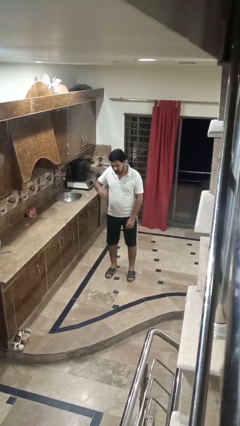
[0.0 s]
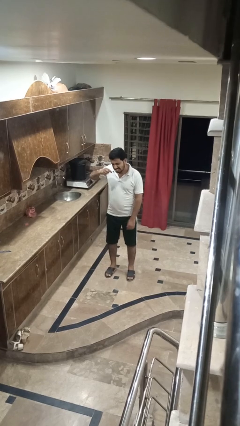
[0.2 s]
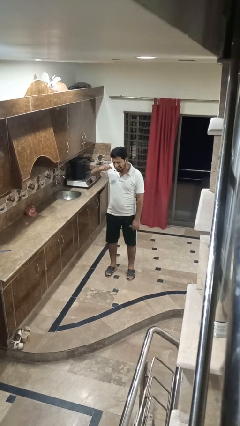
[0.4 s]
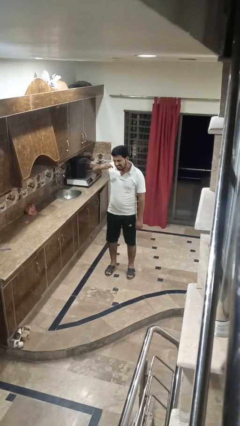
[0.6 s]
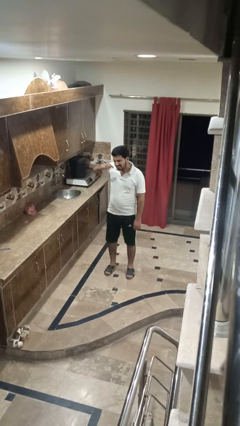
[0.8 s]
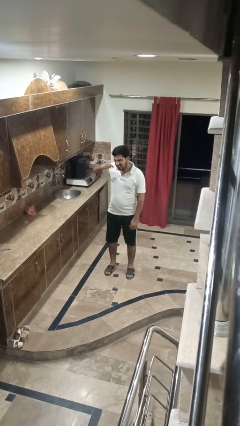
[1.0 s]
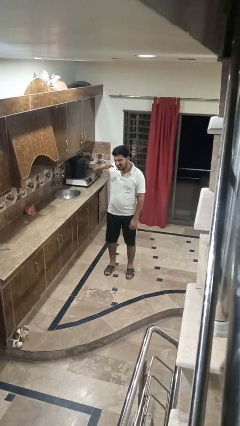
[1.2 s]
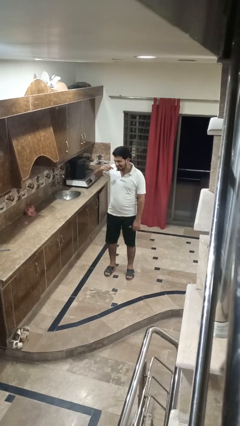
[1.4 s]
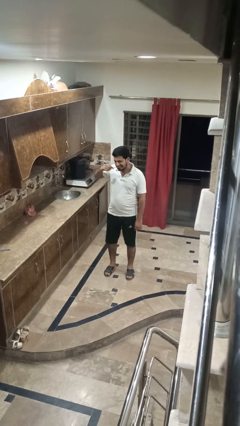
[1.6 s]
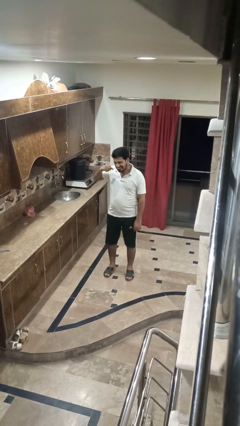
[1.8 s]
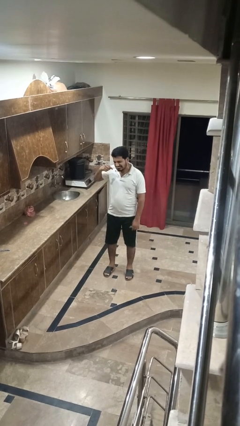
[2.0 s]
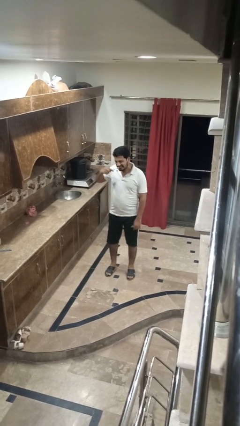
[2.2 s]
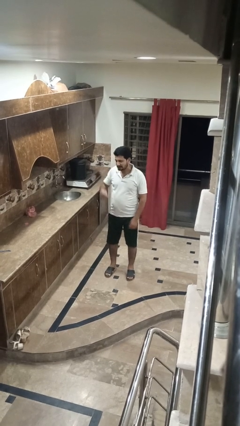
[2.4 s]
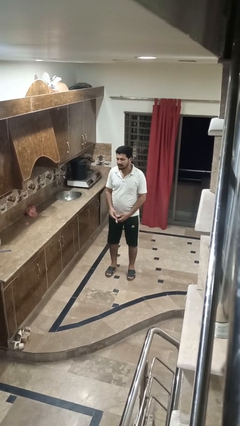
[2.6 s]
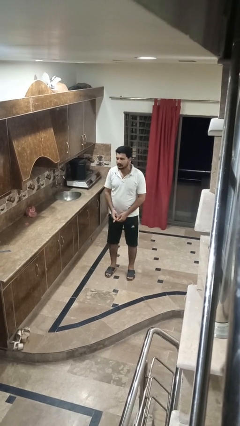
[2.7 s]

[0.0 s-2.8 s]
person brushes teeth

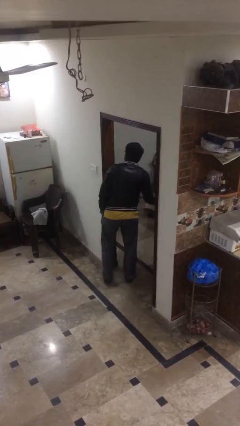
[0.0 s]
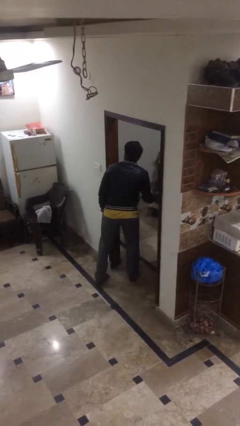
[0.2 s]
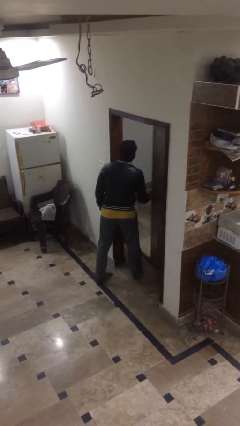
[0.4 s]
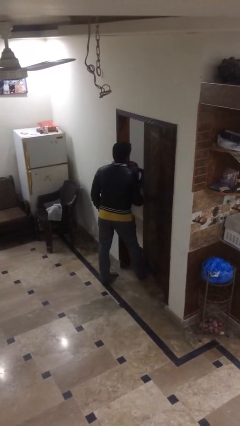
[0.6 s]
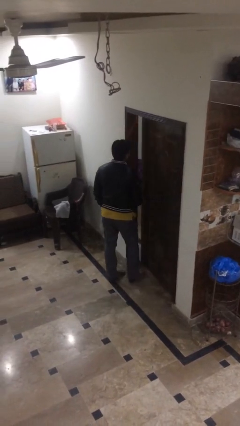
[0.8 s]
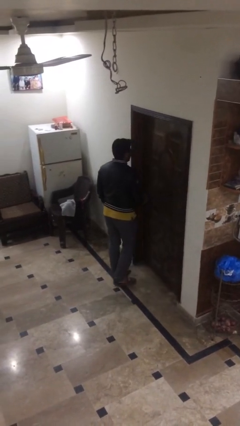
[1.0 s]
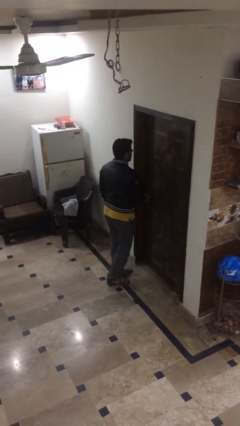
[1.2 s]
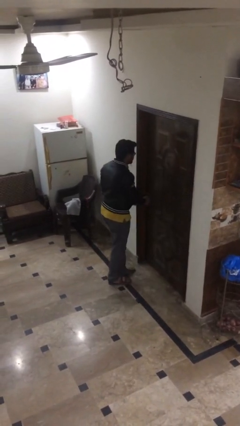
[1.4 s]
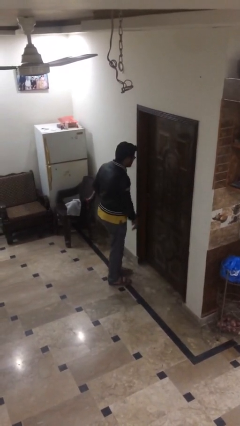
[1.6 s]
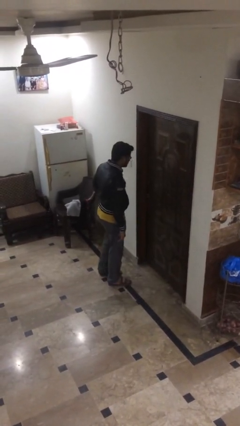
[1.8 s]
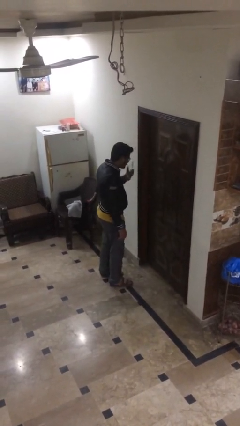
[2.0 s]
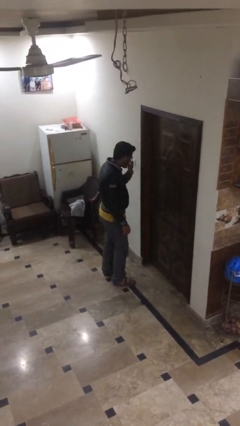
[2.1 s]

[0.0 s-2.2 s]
person closes facility door

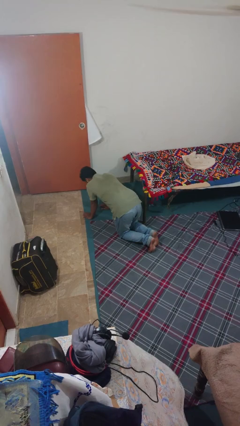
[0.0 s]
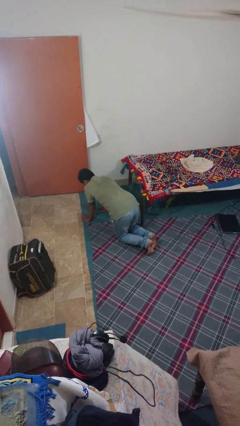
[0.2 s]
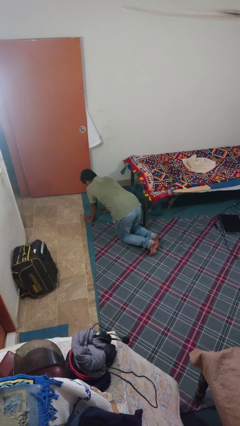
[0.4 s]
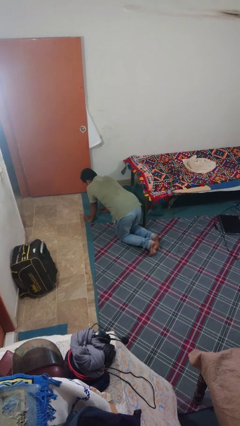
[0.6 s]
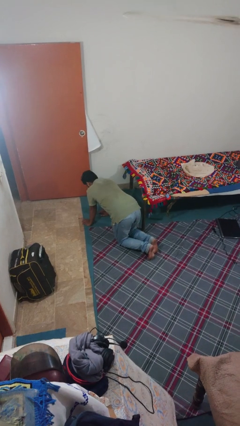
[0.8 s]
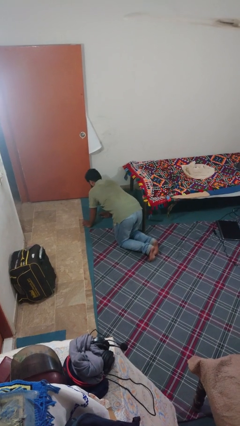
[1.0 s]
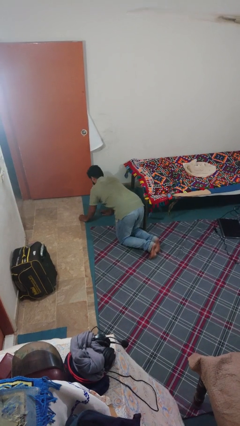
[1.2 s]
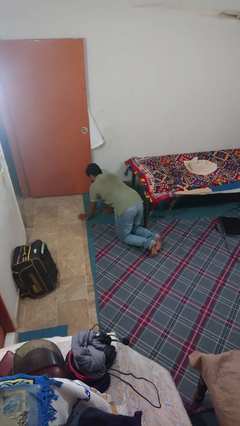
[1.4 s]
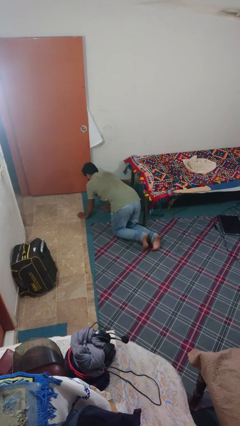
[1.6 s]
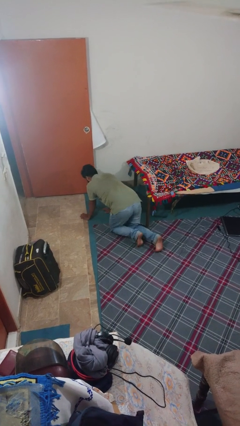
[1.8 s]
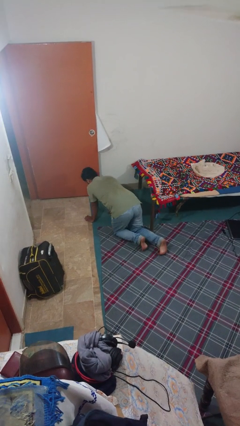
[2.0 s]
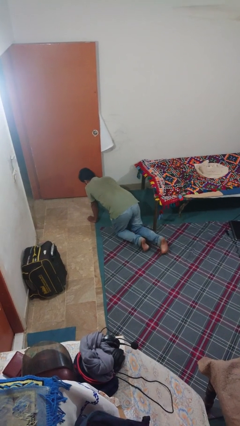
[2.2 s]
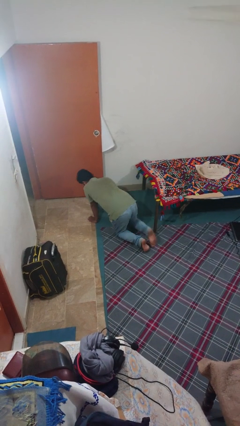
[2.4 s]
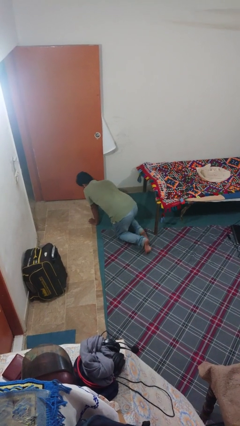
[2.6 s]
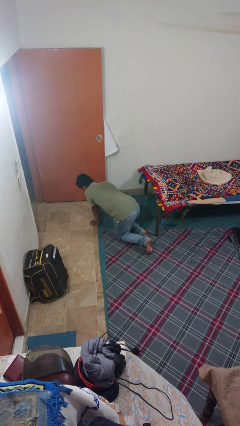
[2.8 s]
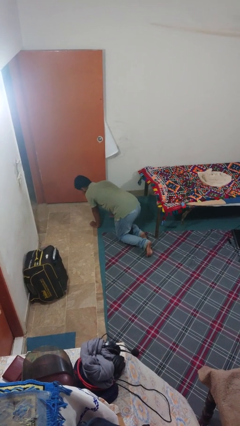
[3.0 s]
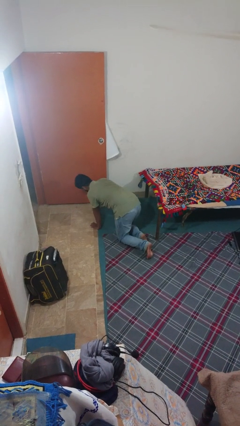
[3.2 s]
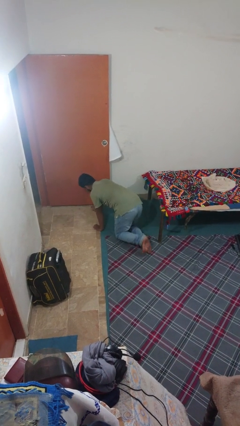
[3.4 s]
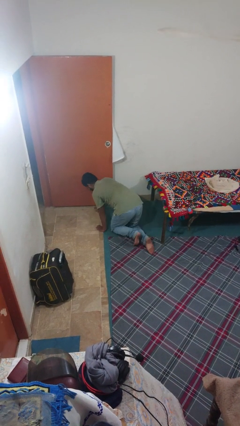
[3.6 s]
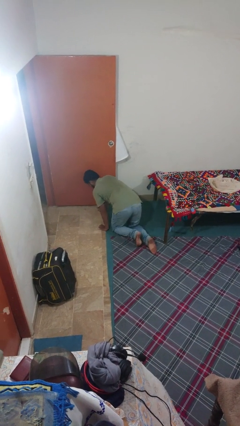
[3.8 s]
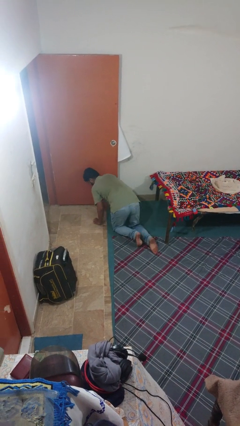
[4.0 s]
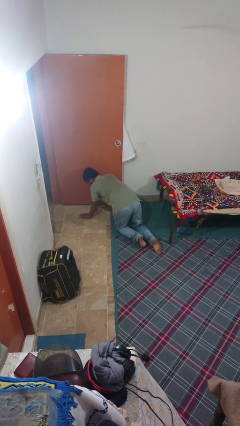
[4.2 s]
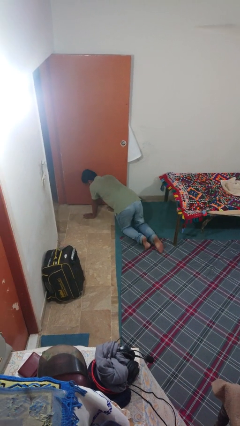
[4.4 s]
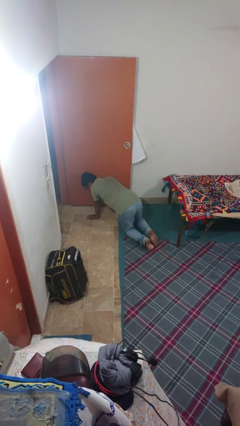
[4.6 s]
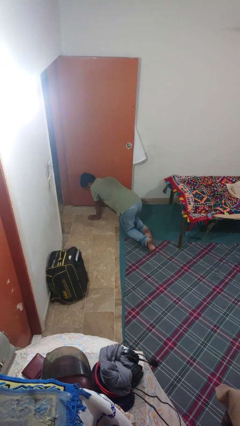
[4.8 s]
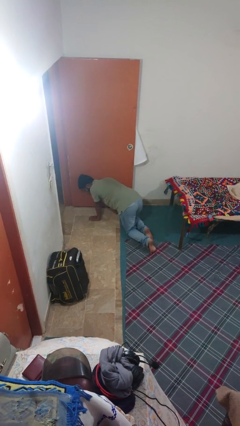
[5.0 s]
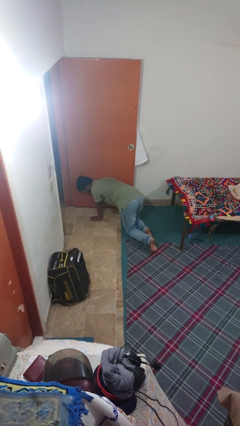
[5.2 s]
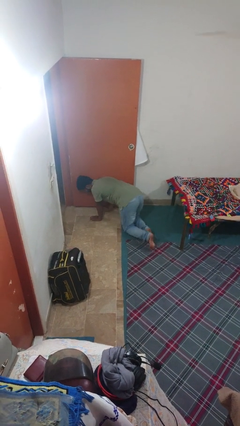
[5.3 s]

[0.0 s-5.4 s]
person crawls

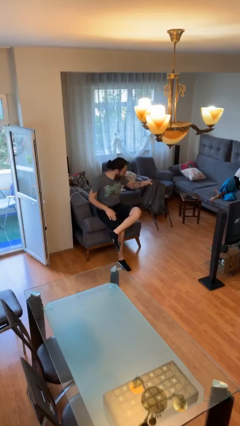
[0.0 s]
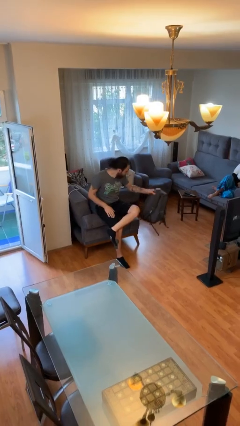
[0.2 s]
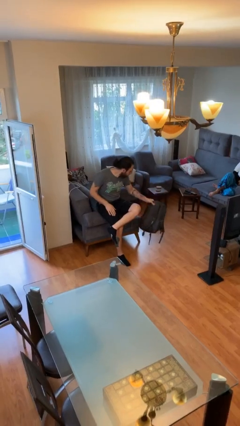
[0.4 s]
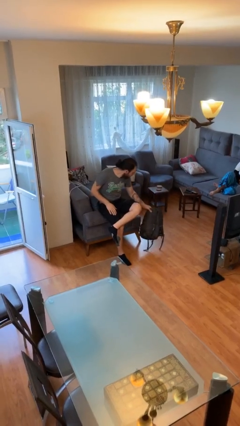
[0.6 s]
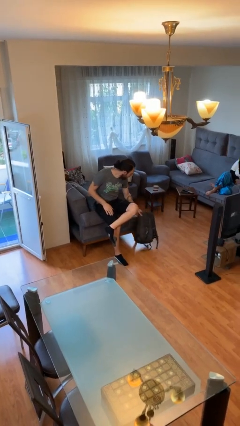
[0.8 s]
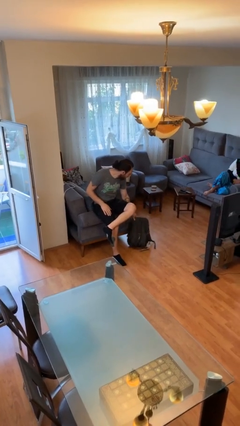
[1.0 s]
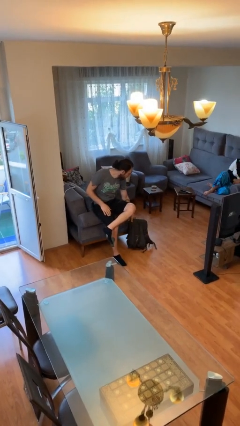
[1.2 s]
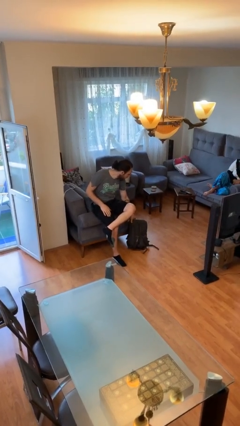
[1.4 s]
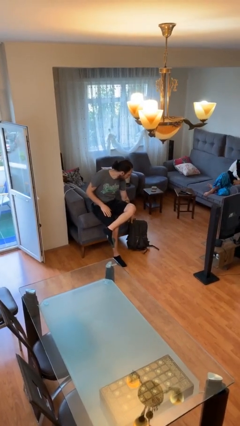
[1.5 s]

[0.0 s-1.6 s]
person puts down object on floor

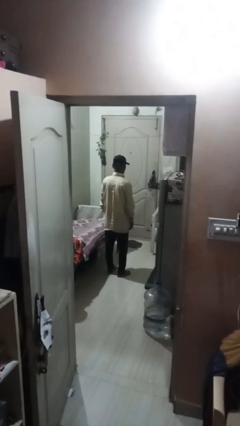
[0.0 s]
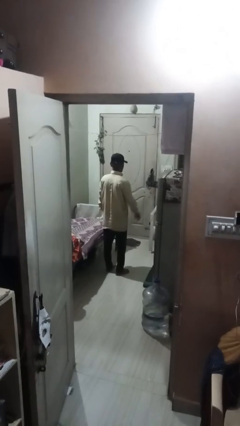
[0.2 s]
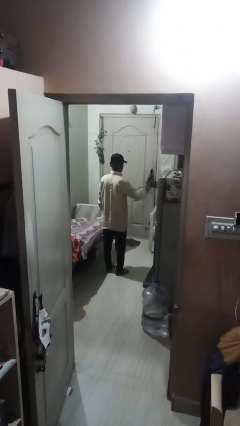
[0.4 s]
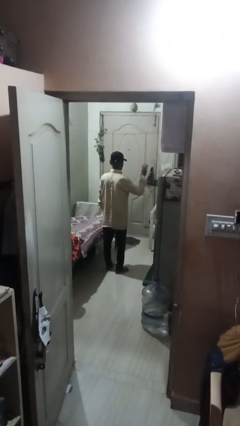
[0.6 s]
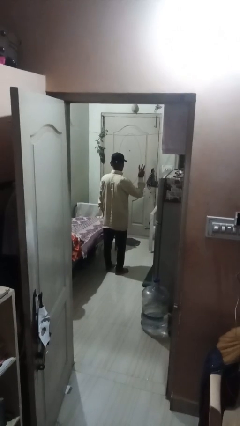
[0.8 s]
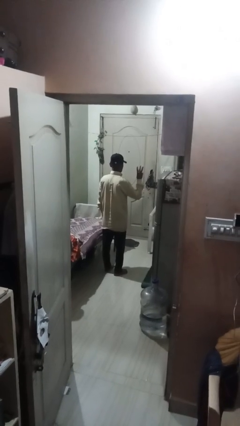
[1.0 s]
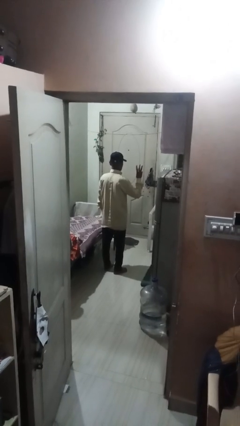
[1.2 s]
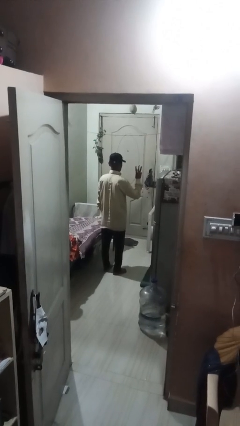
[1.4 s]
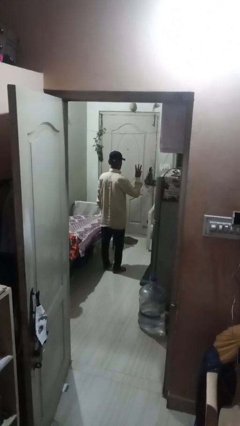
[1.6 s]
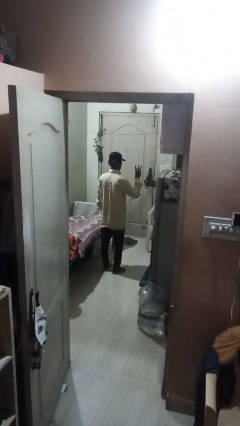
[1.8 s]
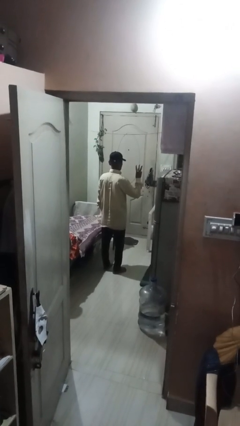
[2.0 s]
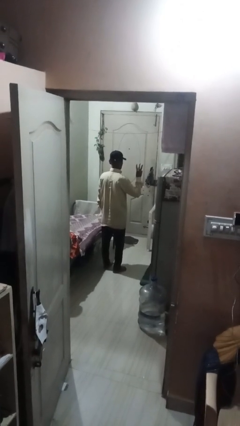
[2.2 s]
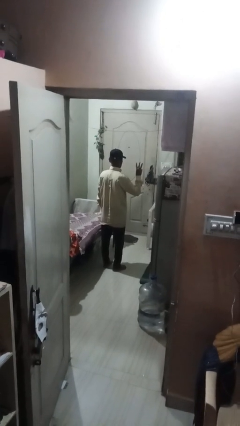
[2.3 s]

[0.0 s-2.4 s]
person gestures number three

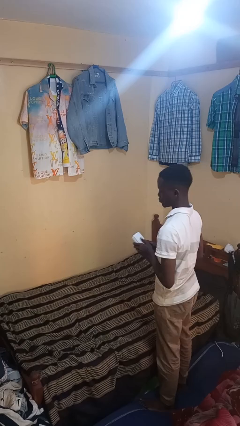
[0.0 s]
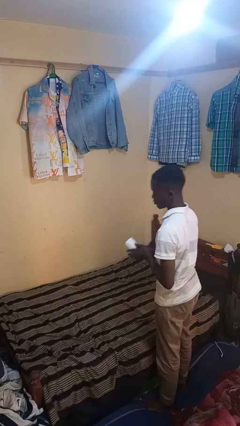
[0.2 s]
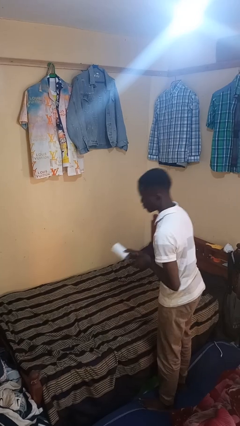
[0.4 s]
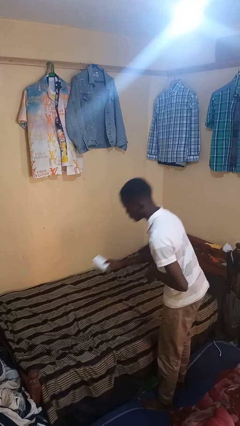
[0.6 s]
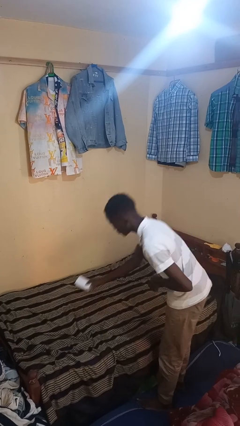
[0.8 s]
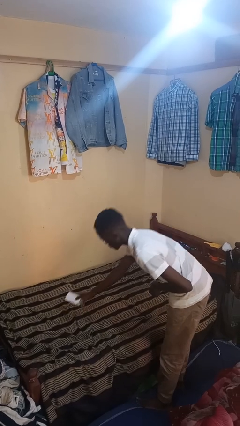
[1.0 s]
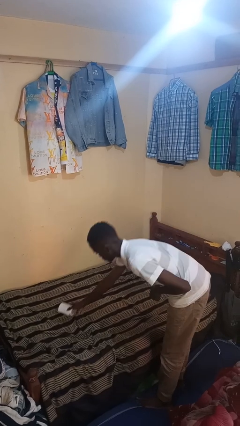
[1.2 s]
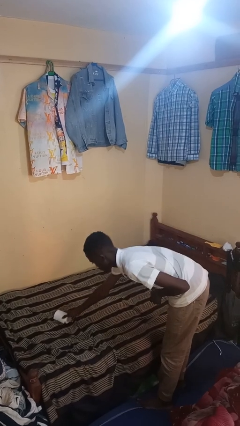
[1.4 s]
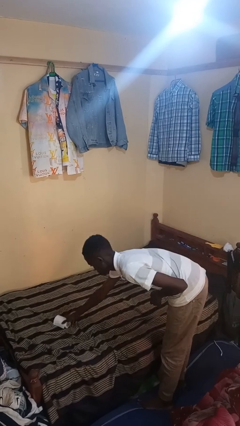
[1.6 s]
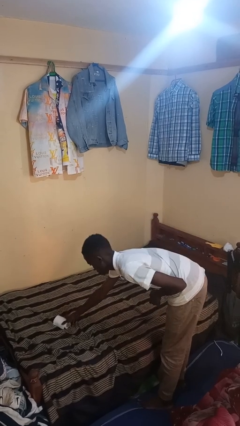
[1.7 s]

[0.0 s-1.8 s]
person puts down object on bed

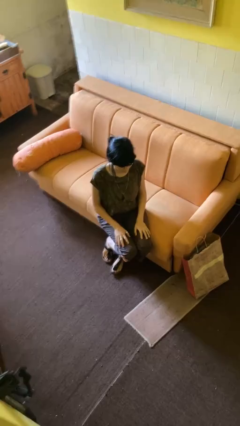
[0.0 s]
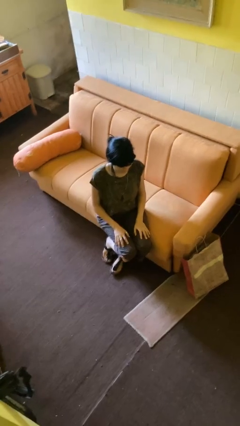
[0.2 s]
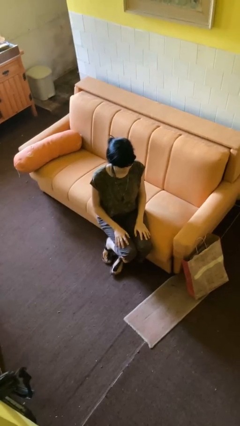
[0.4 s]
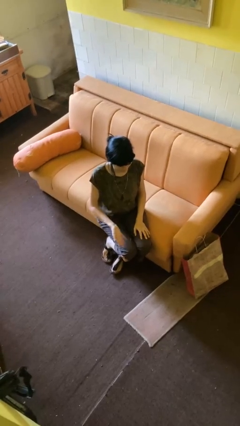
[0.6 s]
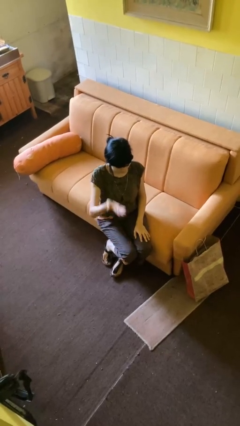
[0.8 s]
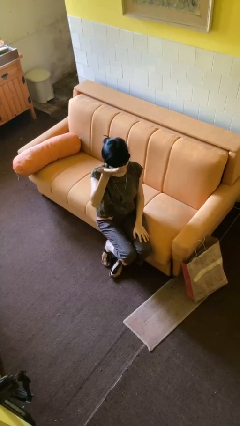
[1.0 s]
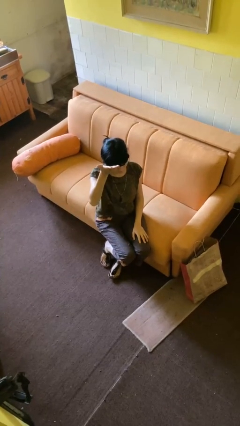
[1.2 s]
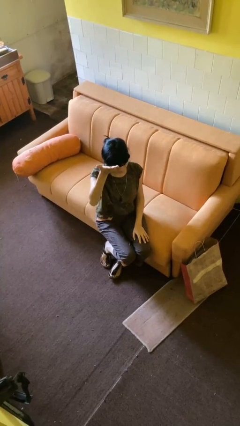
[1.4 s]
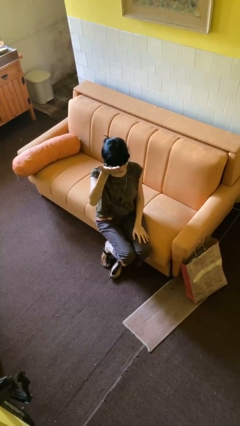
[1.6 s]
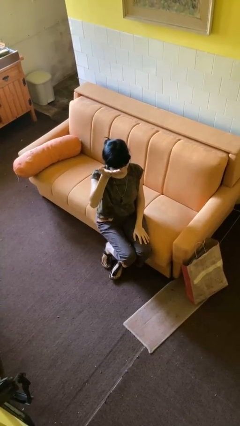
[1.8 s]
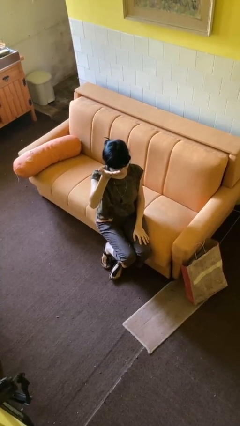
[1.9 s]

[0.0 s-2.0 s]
person gestures swipe up
